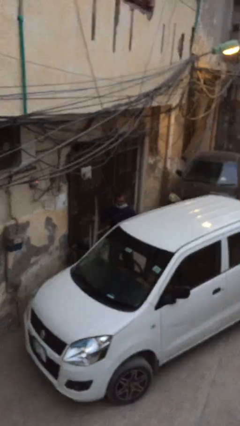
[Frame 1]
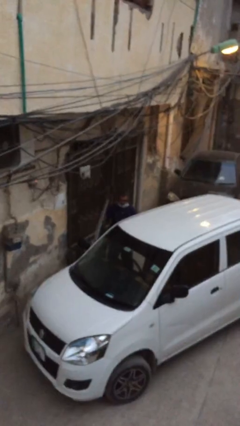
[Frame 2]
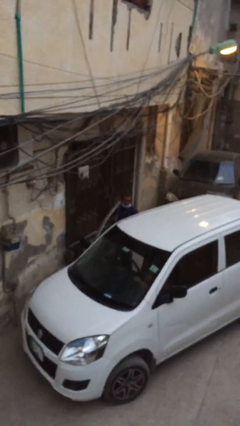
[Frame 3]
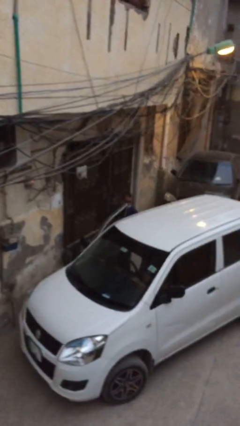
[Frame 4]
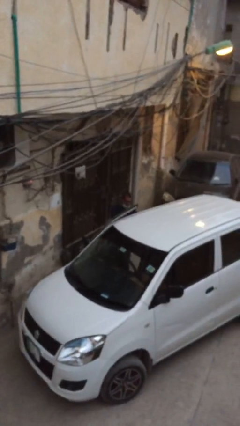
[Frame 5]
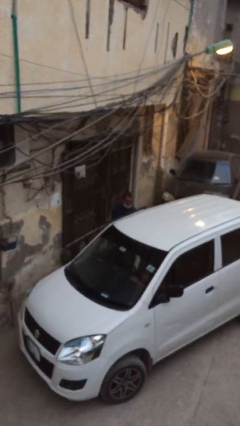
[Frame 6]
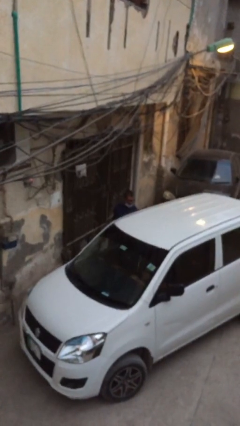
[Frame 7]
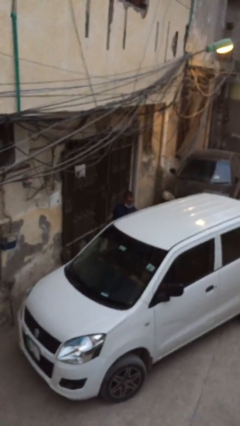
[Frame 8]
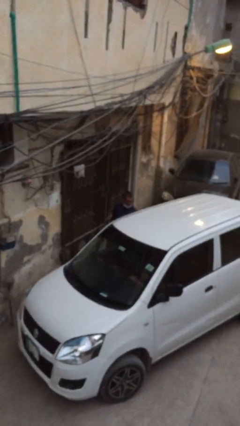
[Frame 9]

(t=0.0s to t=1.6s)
person closes car door

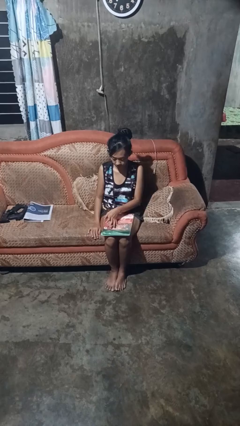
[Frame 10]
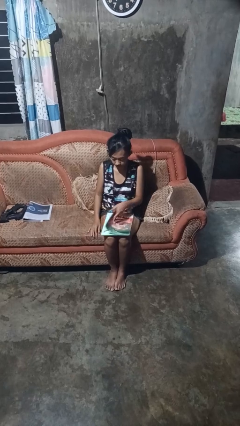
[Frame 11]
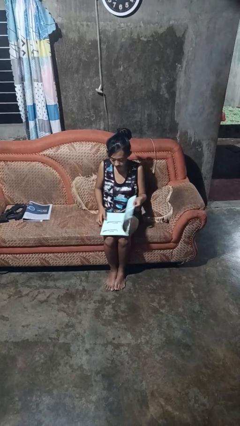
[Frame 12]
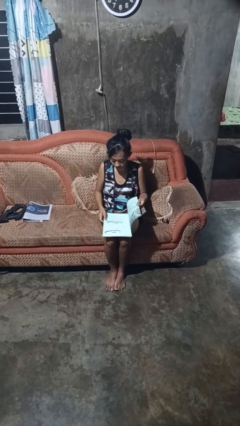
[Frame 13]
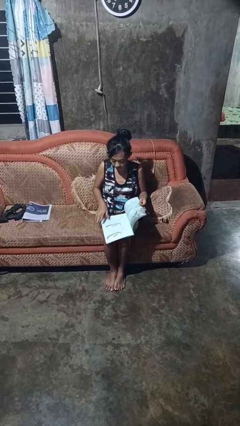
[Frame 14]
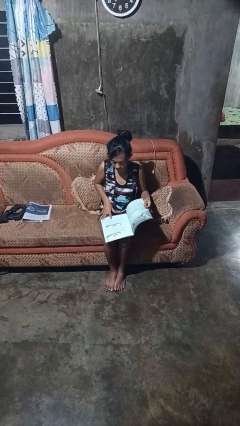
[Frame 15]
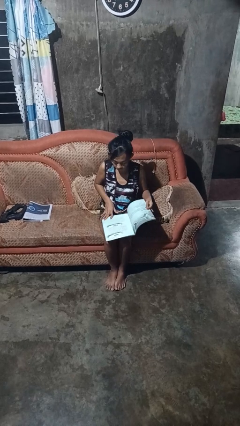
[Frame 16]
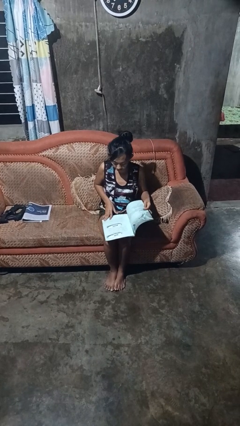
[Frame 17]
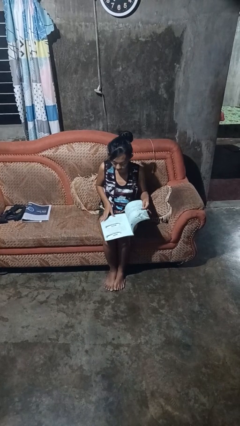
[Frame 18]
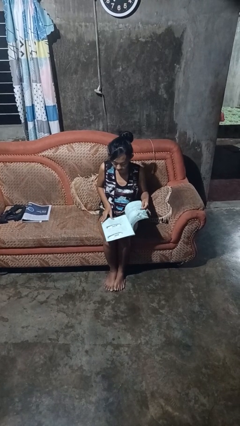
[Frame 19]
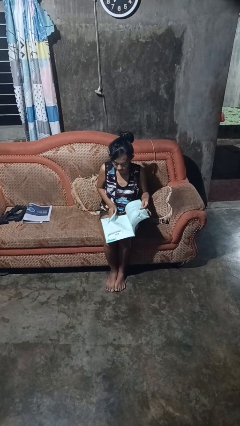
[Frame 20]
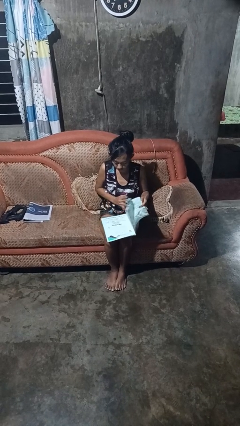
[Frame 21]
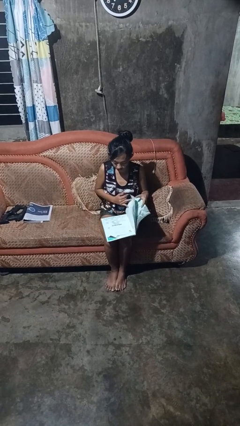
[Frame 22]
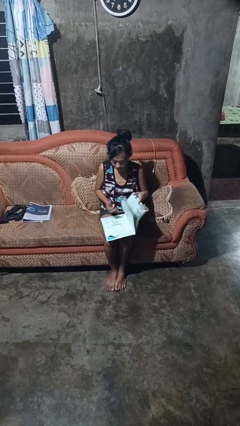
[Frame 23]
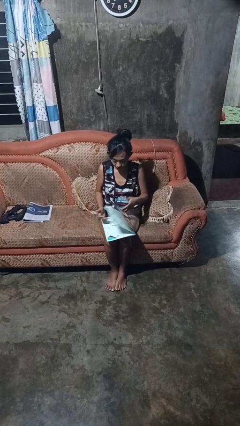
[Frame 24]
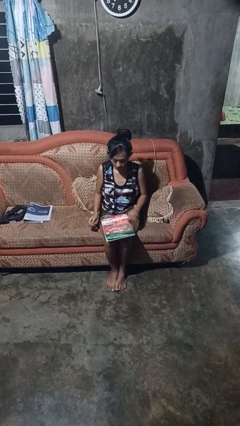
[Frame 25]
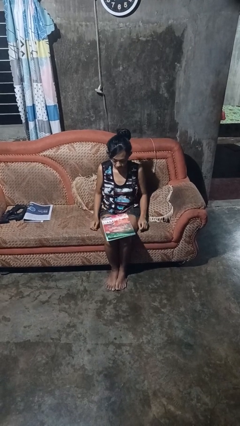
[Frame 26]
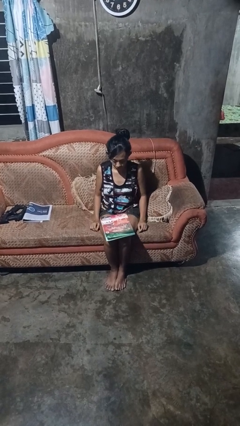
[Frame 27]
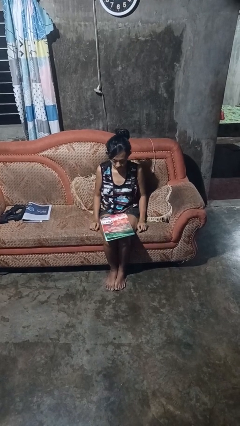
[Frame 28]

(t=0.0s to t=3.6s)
person reads magazine

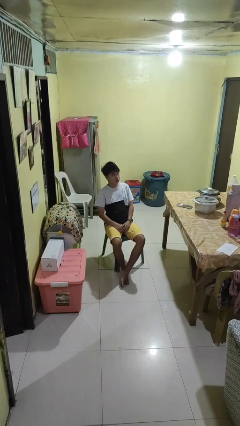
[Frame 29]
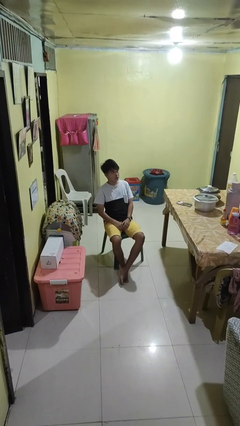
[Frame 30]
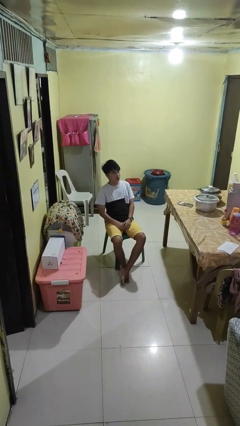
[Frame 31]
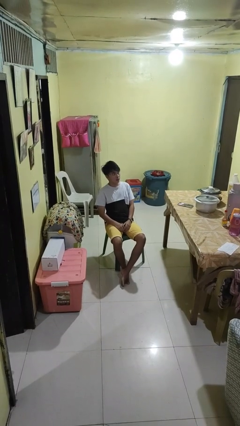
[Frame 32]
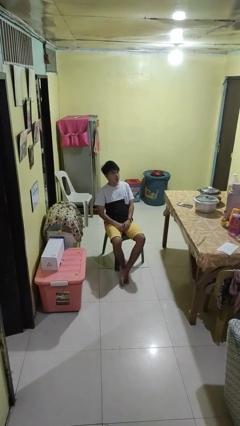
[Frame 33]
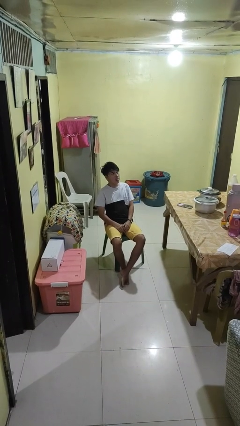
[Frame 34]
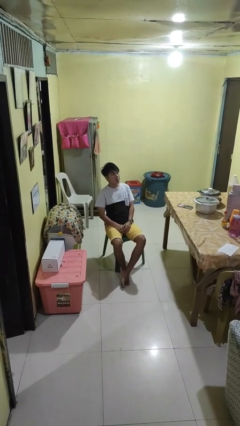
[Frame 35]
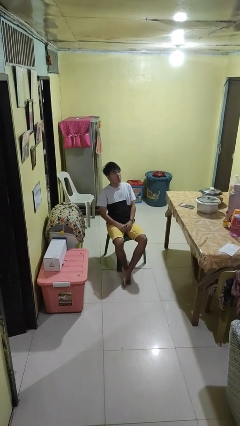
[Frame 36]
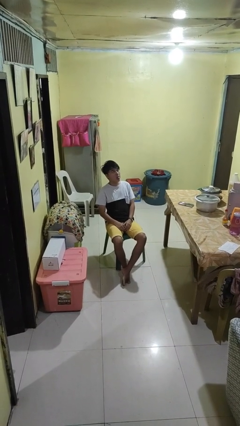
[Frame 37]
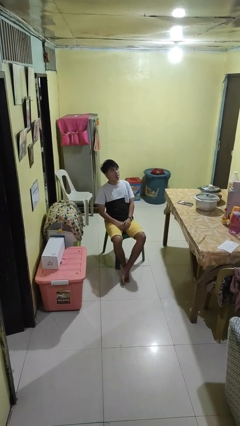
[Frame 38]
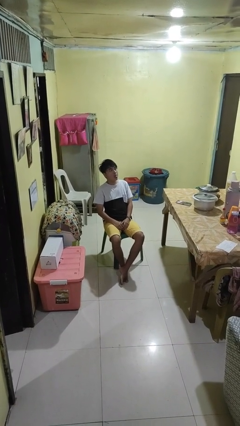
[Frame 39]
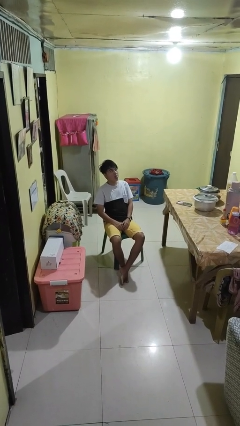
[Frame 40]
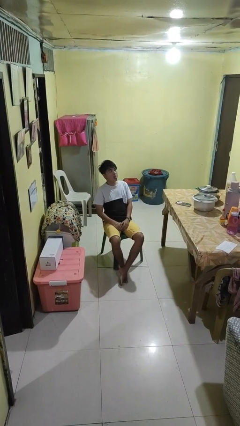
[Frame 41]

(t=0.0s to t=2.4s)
person sticks out tongue

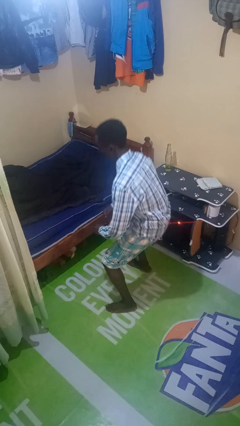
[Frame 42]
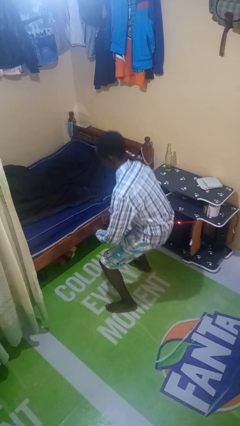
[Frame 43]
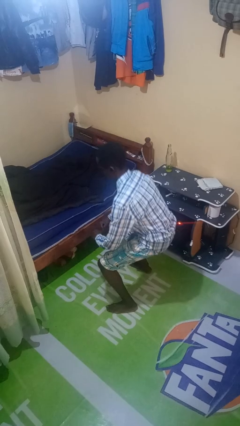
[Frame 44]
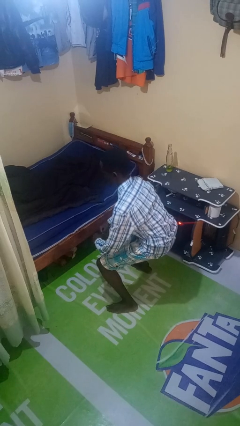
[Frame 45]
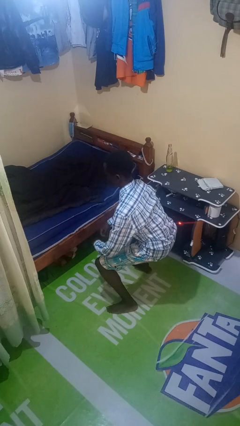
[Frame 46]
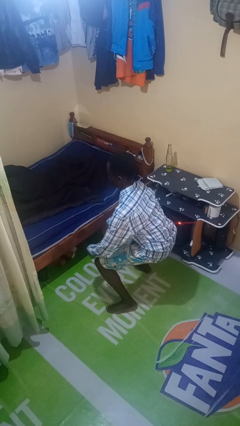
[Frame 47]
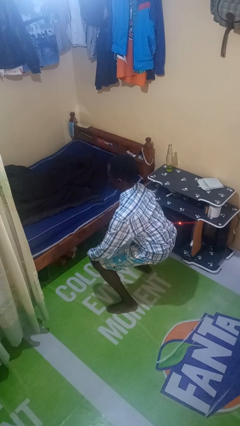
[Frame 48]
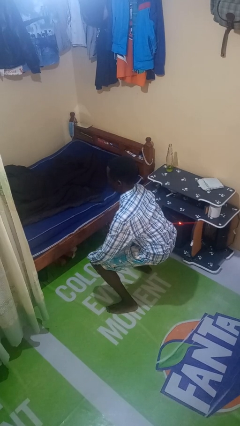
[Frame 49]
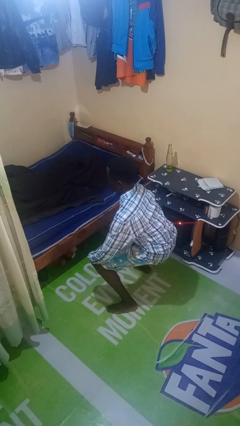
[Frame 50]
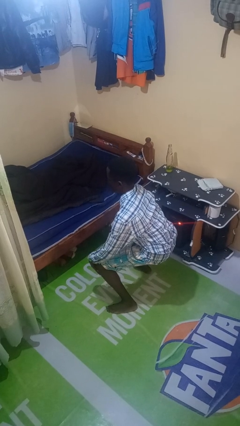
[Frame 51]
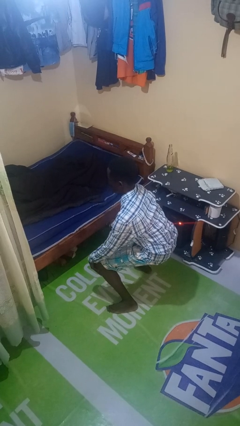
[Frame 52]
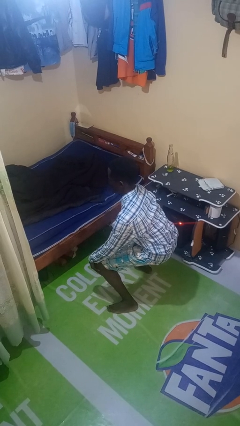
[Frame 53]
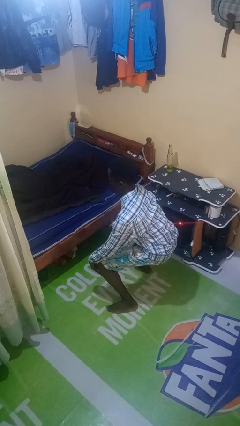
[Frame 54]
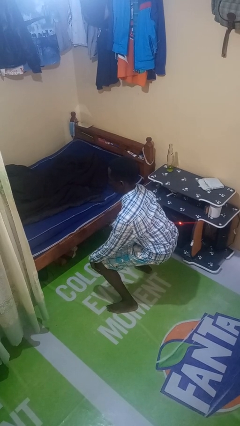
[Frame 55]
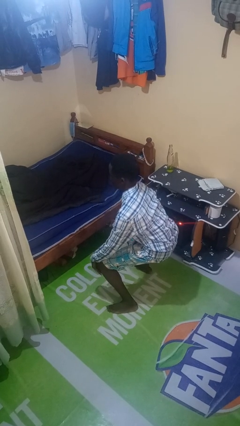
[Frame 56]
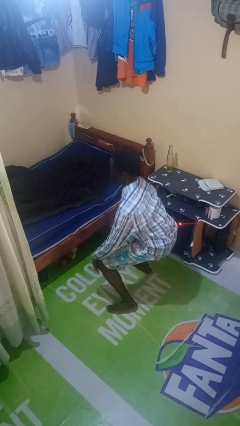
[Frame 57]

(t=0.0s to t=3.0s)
person squats

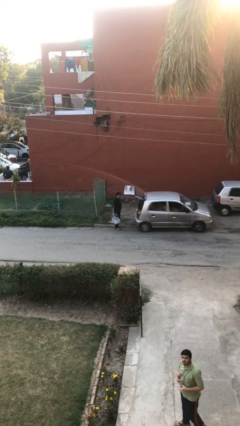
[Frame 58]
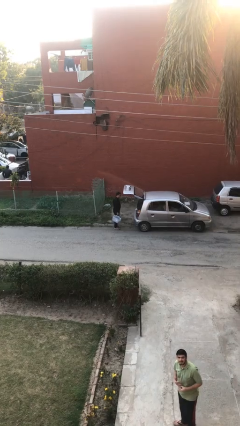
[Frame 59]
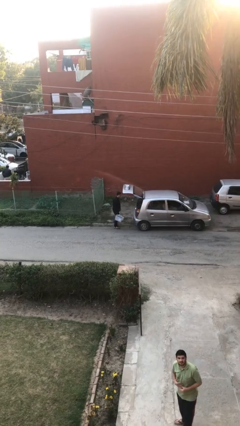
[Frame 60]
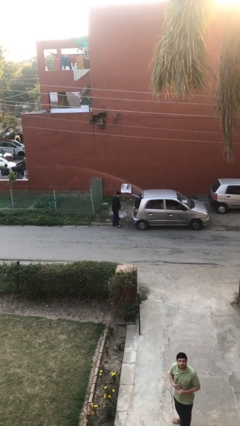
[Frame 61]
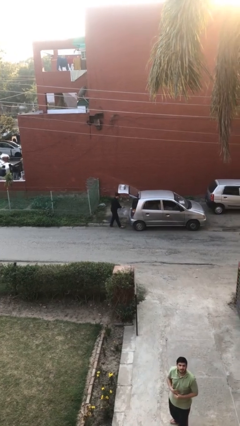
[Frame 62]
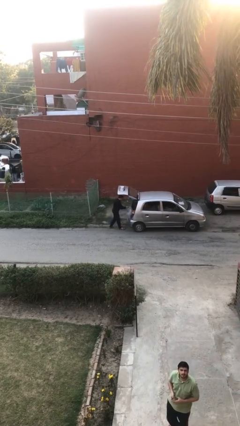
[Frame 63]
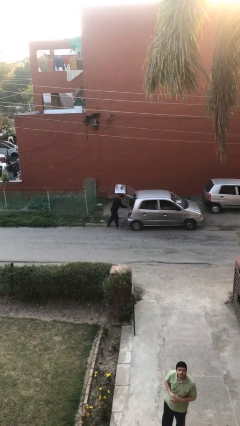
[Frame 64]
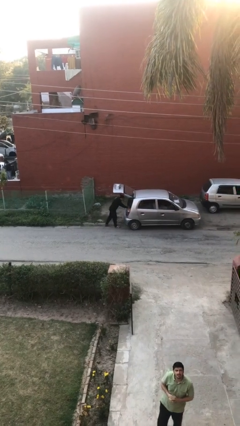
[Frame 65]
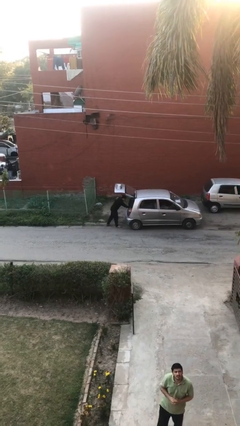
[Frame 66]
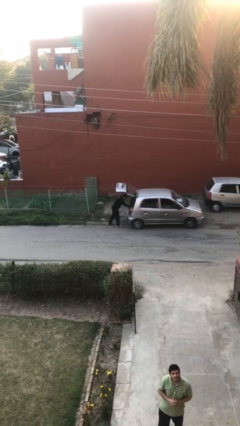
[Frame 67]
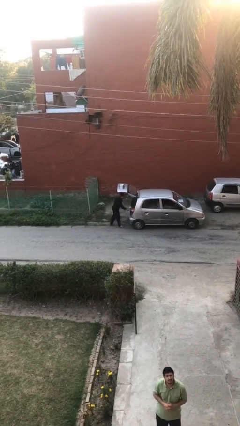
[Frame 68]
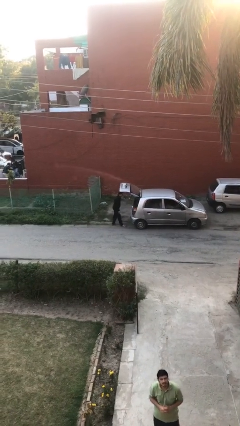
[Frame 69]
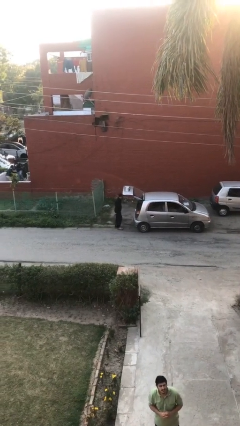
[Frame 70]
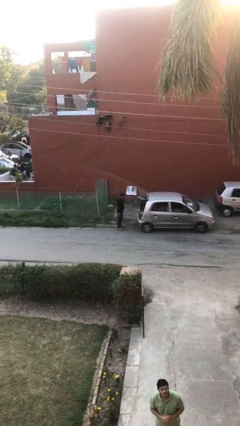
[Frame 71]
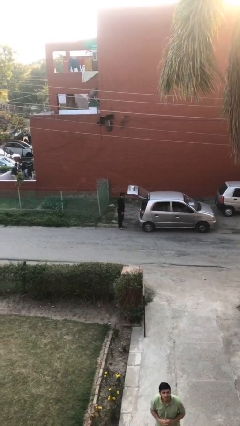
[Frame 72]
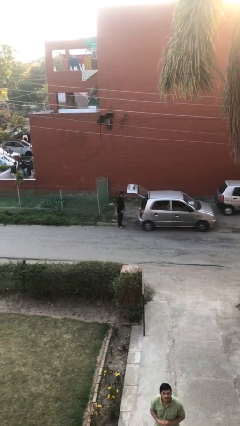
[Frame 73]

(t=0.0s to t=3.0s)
person loads car

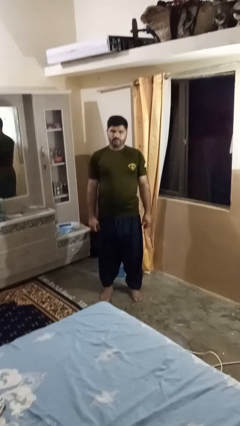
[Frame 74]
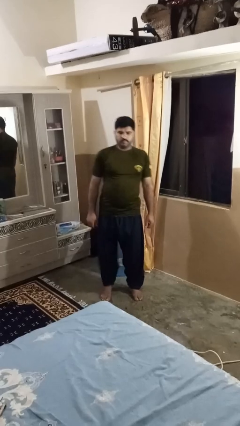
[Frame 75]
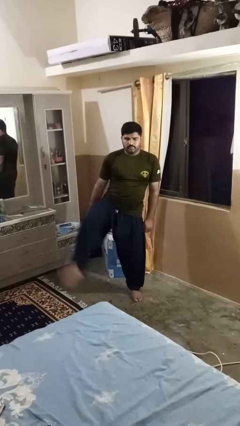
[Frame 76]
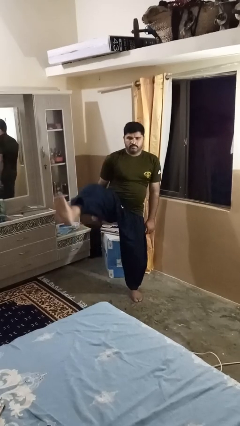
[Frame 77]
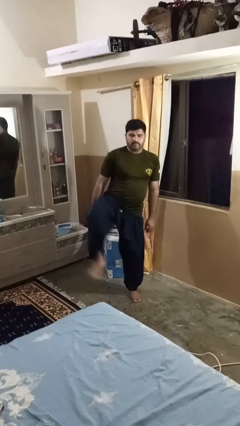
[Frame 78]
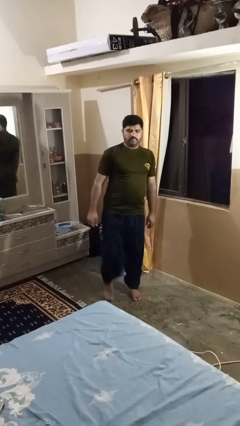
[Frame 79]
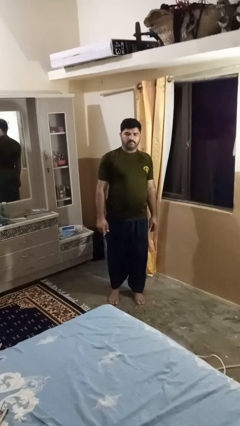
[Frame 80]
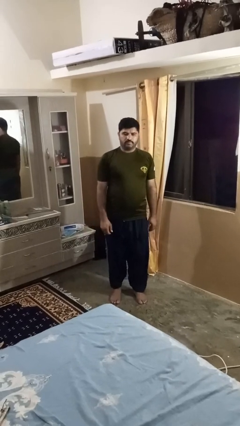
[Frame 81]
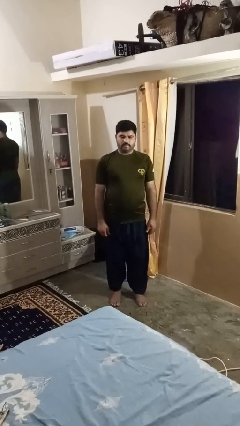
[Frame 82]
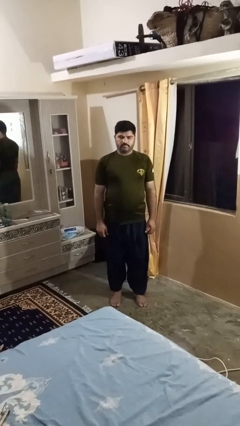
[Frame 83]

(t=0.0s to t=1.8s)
person karate kicks

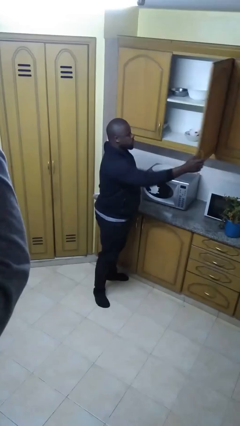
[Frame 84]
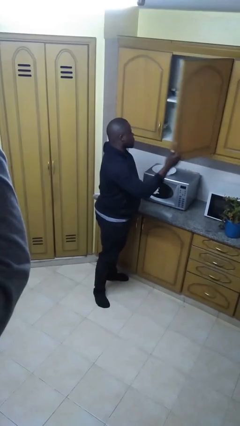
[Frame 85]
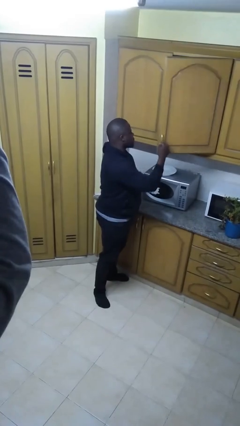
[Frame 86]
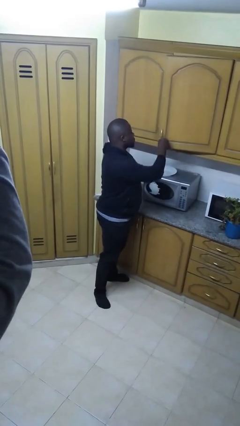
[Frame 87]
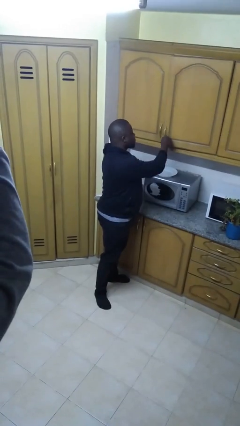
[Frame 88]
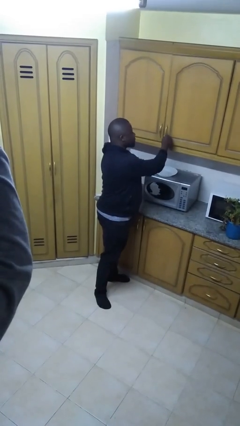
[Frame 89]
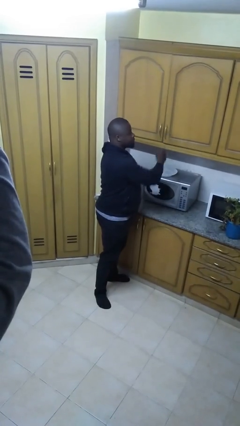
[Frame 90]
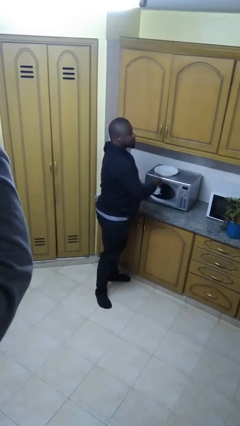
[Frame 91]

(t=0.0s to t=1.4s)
person closes cabinet

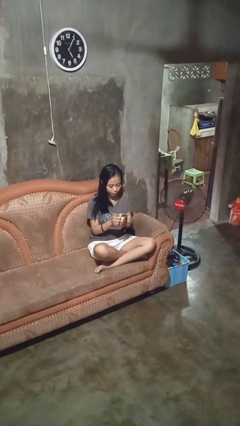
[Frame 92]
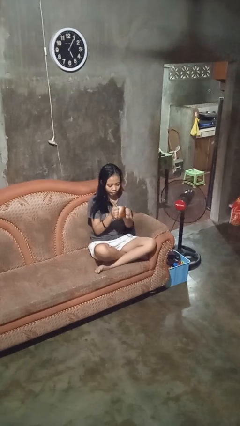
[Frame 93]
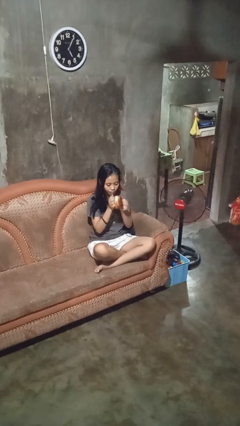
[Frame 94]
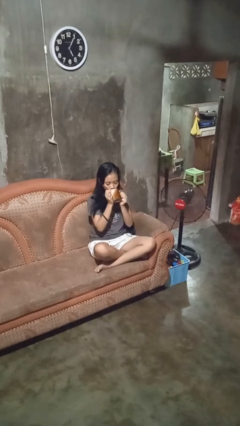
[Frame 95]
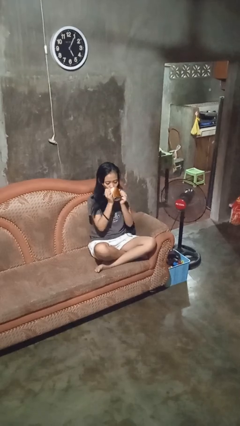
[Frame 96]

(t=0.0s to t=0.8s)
person drinks from mug
